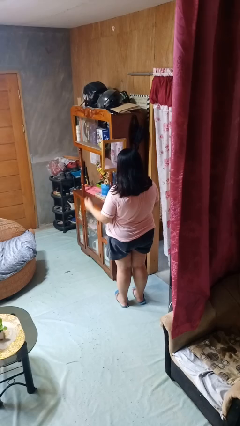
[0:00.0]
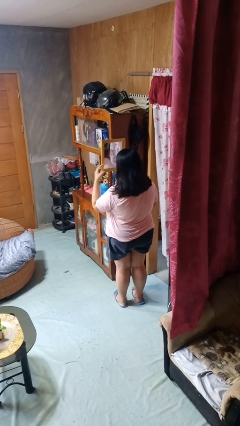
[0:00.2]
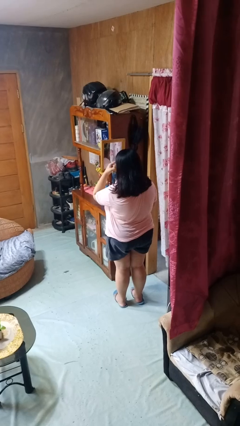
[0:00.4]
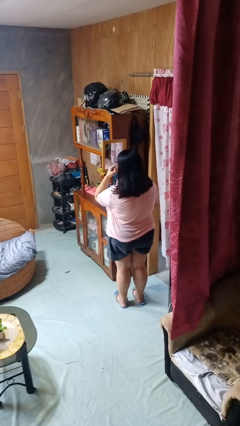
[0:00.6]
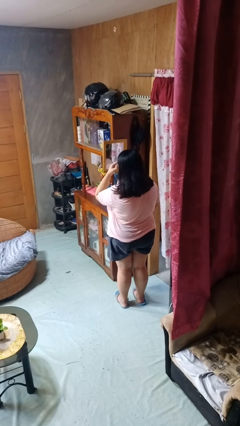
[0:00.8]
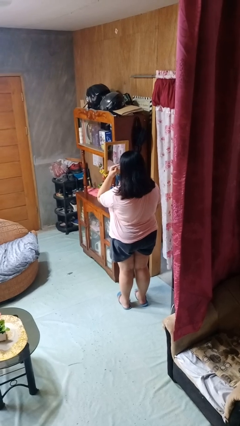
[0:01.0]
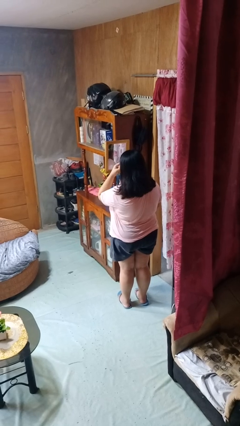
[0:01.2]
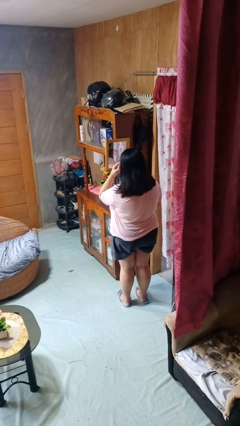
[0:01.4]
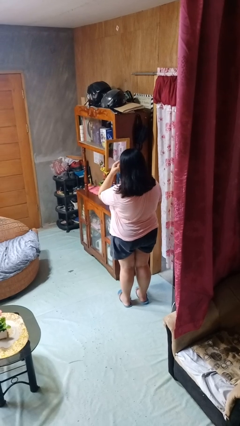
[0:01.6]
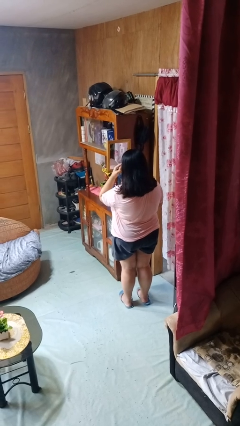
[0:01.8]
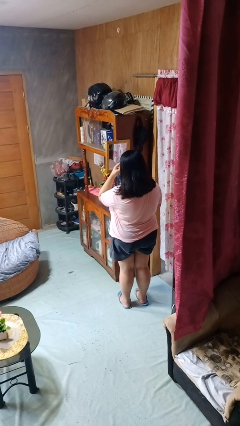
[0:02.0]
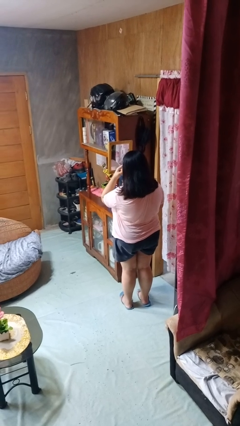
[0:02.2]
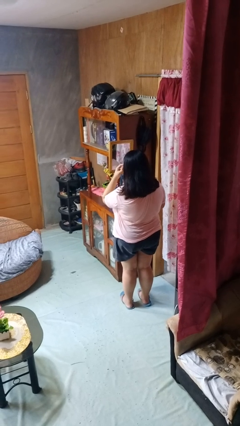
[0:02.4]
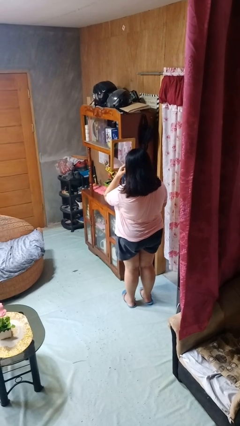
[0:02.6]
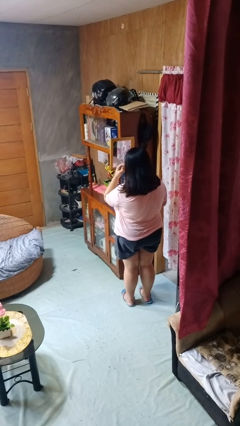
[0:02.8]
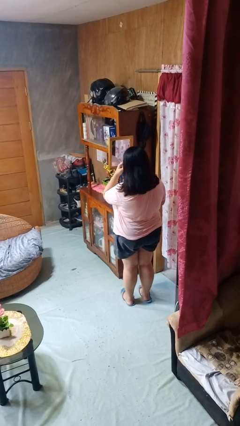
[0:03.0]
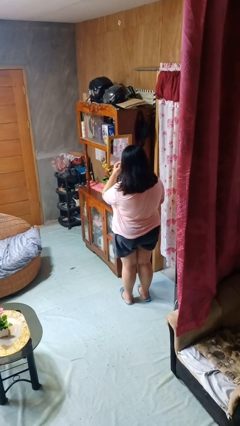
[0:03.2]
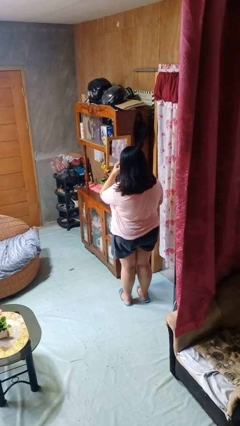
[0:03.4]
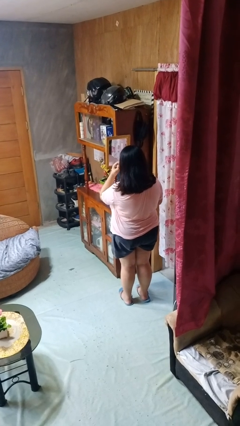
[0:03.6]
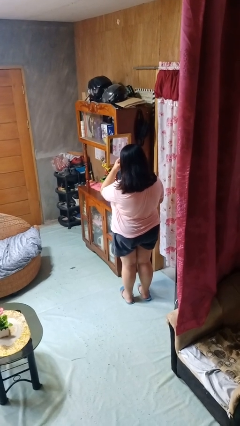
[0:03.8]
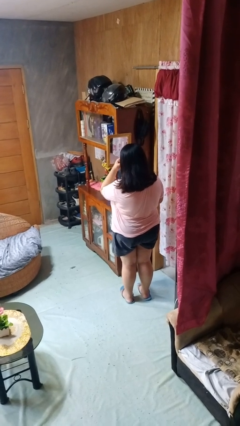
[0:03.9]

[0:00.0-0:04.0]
person applies eye makeup

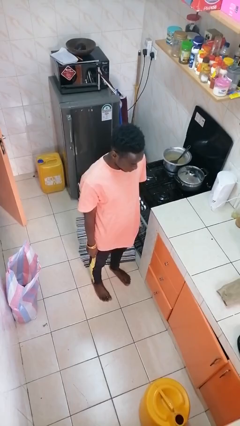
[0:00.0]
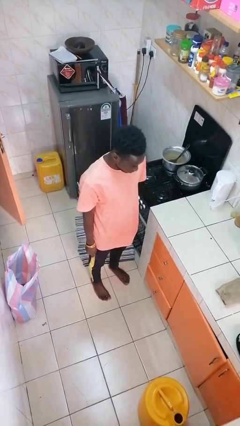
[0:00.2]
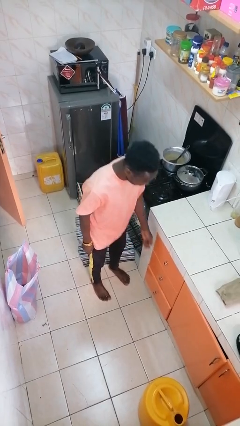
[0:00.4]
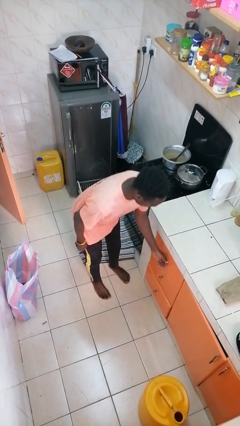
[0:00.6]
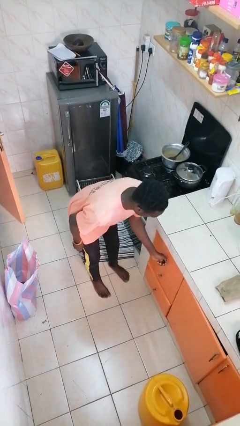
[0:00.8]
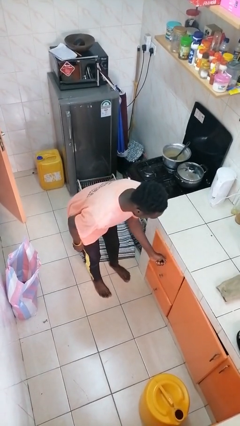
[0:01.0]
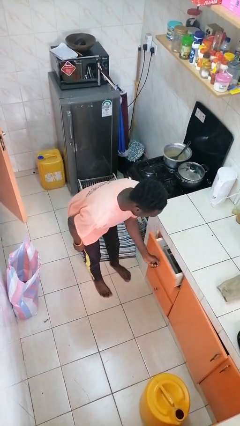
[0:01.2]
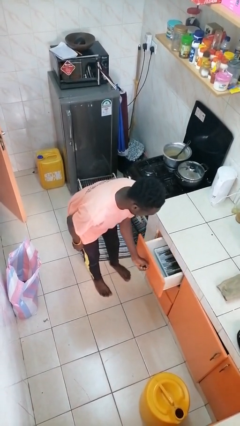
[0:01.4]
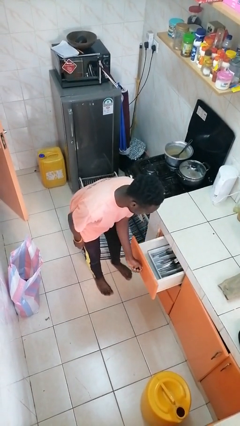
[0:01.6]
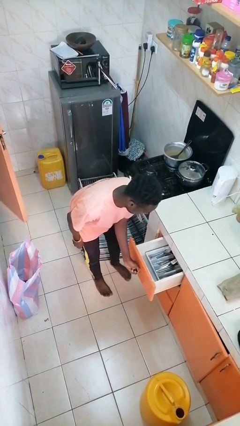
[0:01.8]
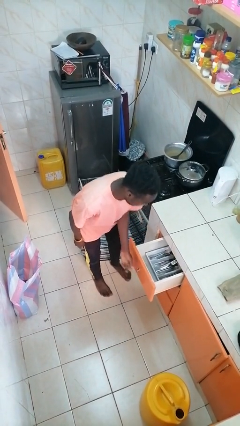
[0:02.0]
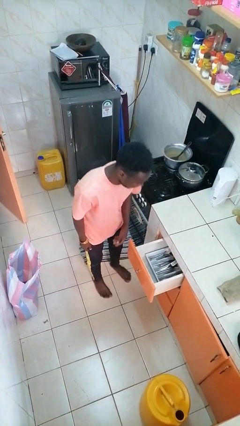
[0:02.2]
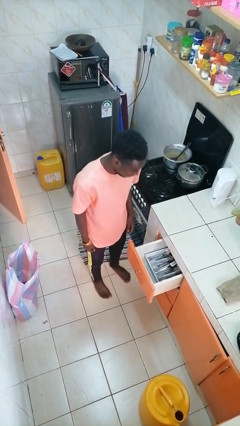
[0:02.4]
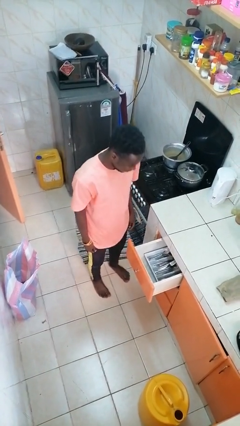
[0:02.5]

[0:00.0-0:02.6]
person opens kitchen drawer

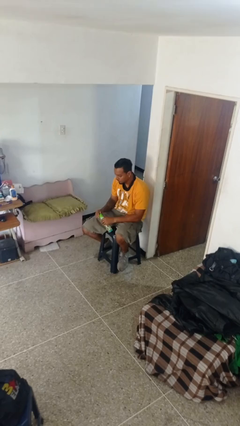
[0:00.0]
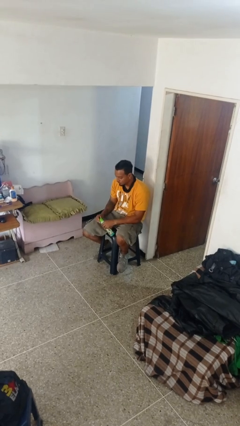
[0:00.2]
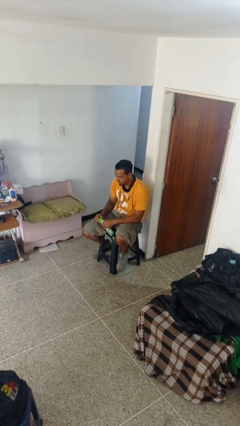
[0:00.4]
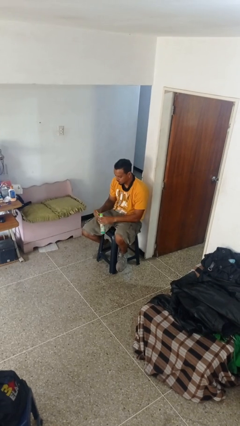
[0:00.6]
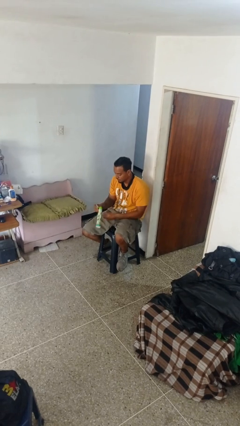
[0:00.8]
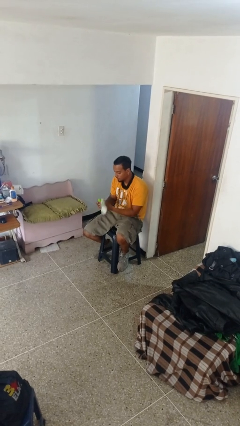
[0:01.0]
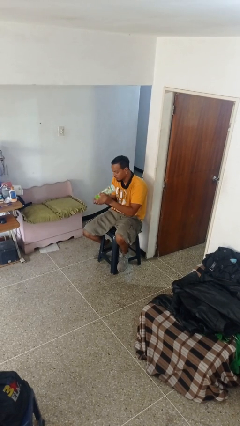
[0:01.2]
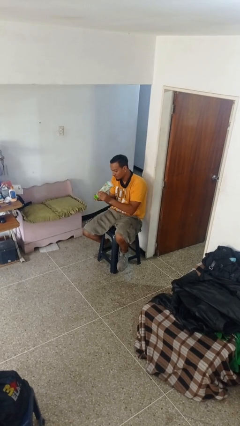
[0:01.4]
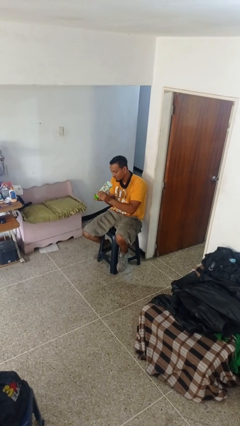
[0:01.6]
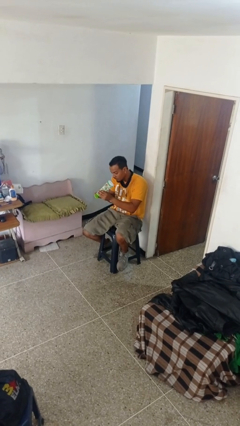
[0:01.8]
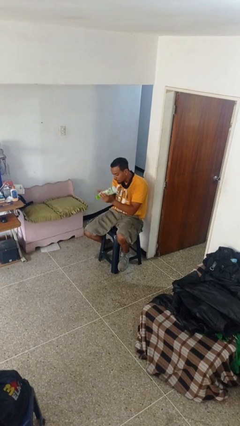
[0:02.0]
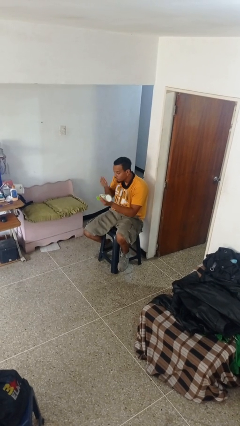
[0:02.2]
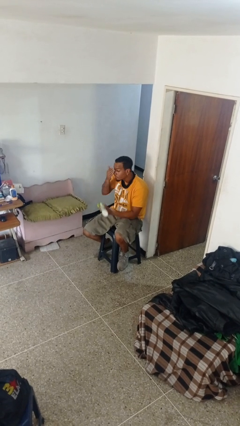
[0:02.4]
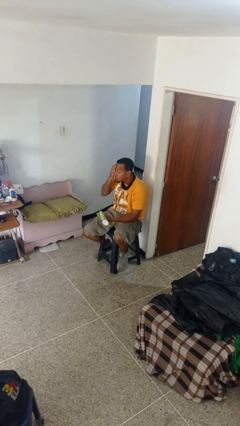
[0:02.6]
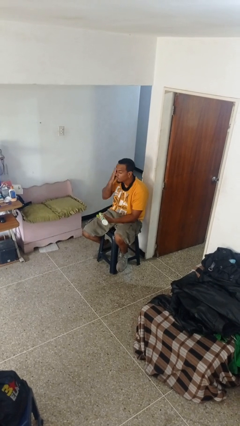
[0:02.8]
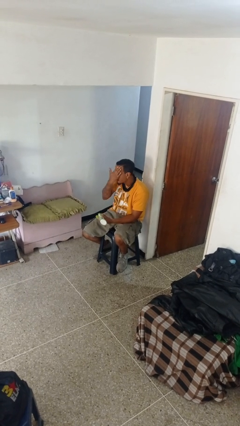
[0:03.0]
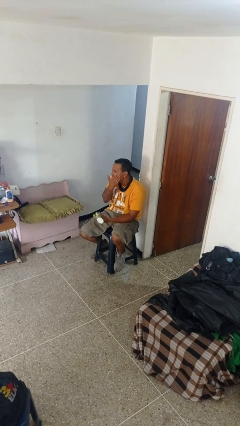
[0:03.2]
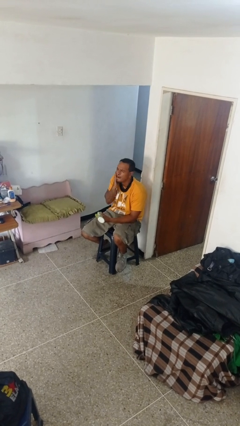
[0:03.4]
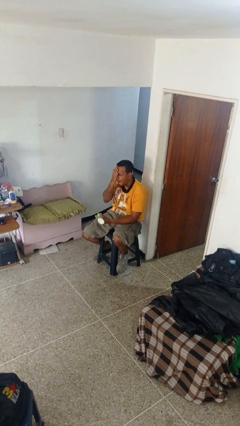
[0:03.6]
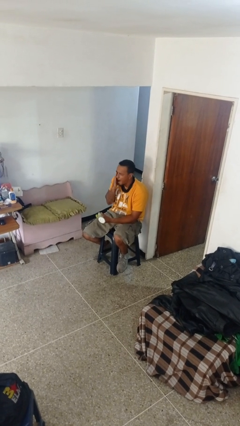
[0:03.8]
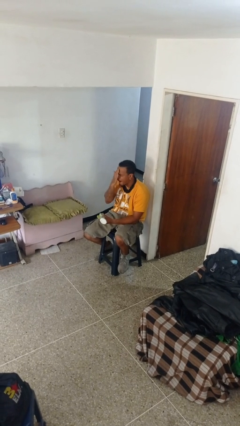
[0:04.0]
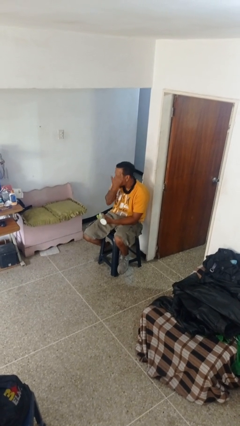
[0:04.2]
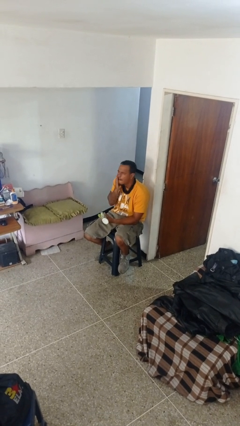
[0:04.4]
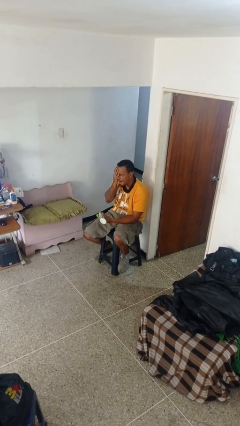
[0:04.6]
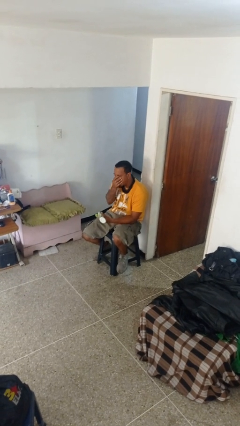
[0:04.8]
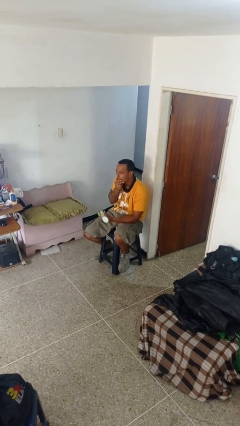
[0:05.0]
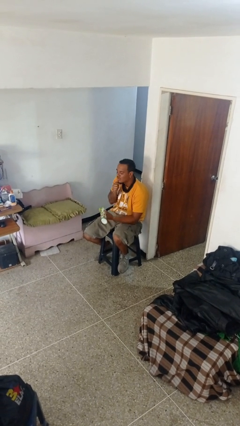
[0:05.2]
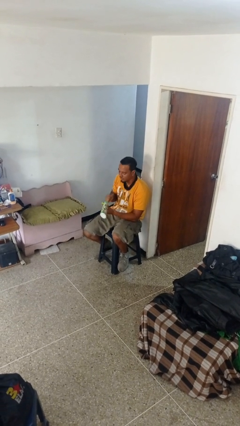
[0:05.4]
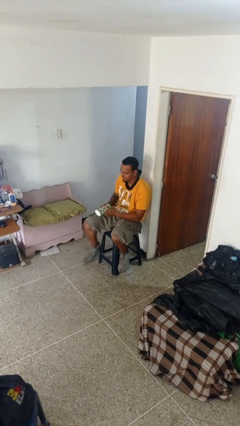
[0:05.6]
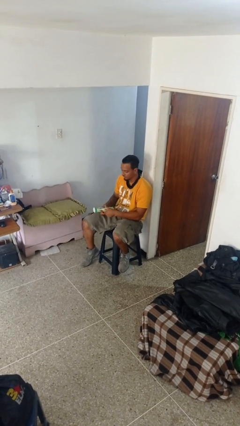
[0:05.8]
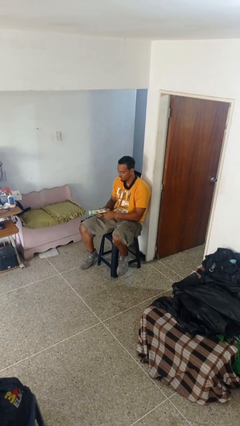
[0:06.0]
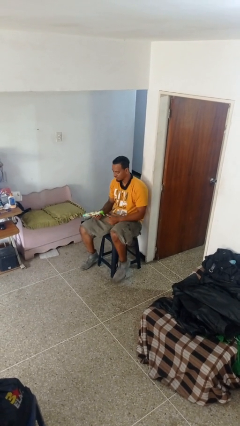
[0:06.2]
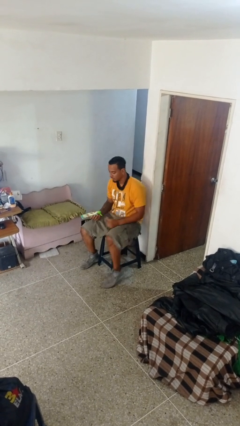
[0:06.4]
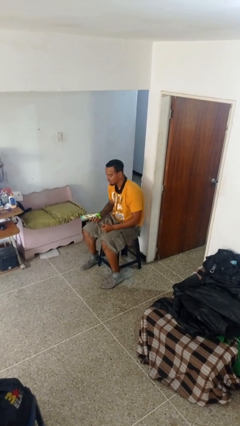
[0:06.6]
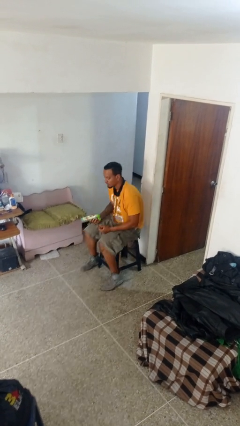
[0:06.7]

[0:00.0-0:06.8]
person applies facial moisturizer

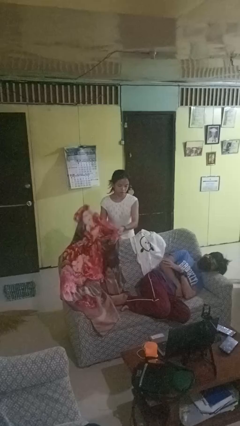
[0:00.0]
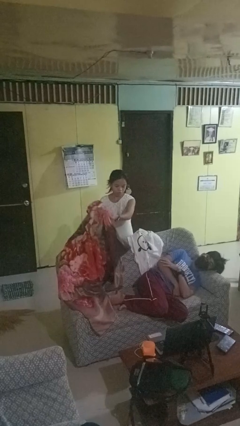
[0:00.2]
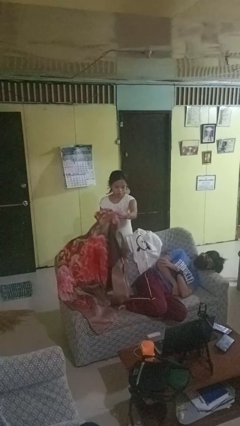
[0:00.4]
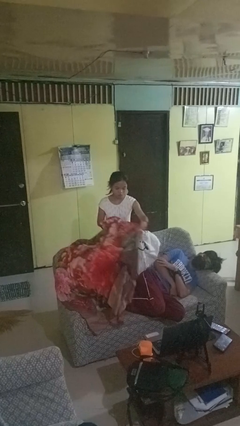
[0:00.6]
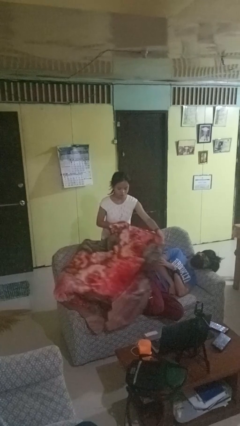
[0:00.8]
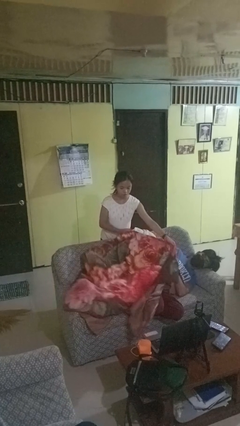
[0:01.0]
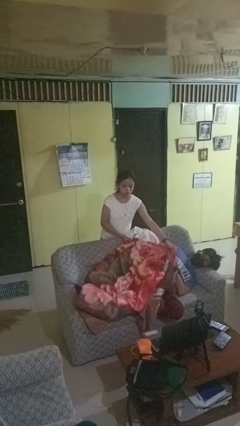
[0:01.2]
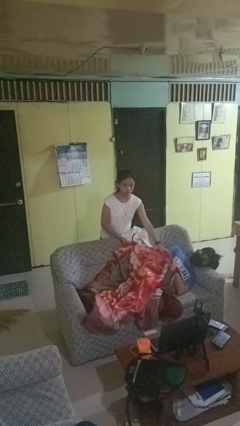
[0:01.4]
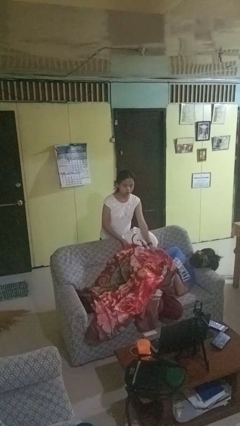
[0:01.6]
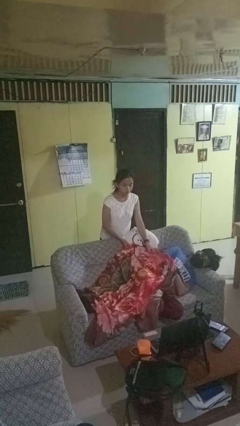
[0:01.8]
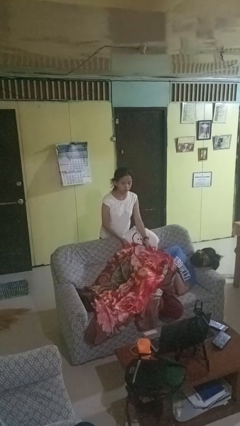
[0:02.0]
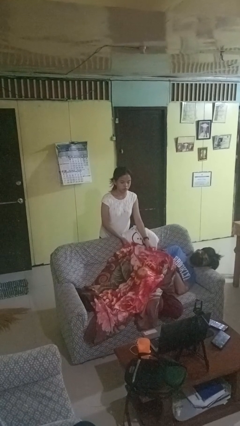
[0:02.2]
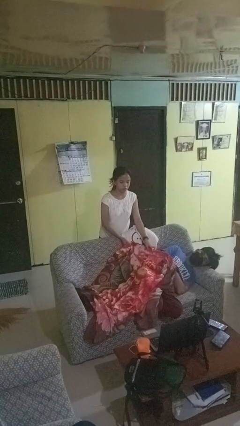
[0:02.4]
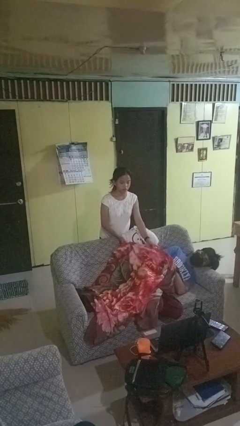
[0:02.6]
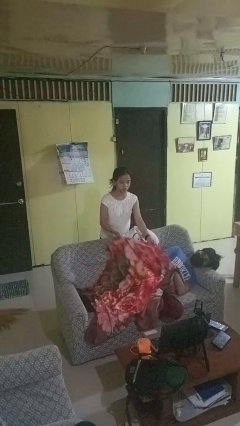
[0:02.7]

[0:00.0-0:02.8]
person covers friend with blanket

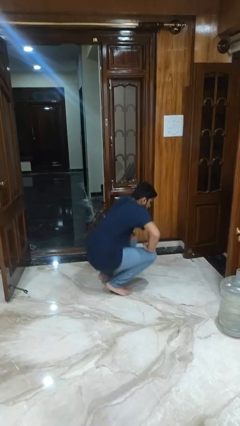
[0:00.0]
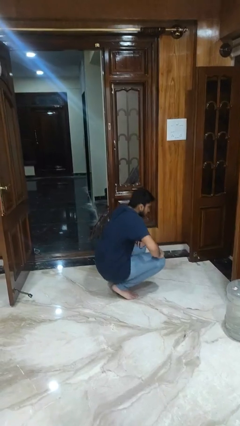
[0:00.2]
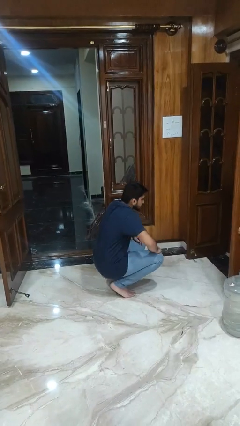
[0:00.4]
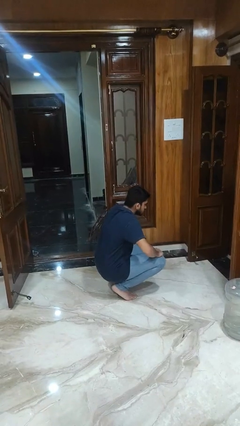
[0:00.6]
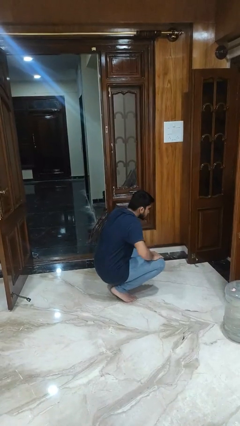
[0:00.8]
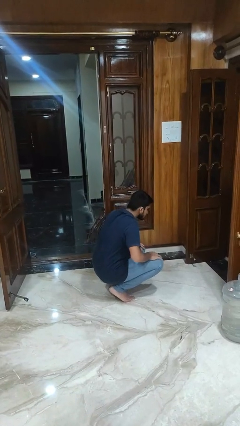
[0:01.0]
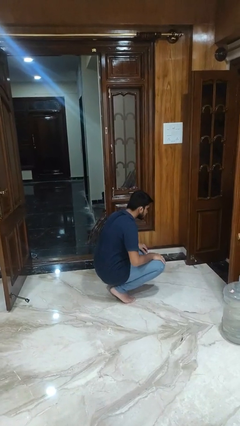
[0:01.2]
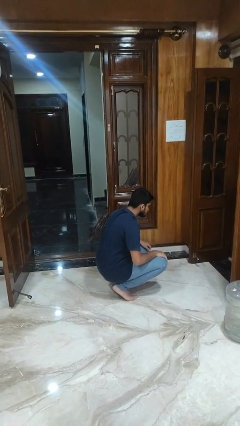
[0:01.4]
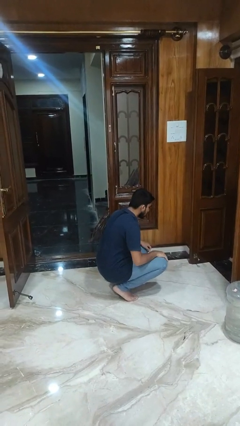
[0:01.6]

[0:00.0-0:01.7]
person squats
